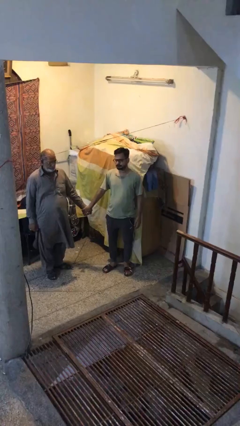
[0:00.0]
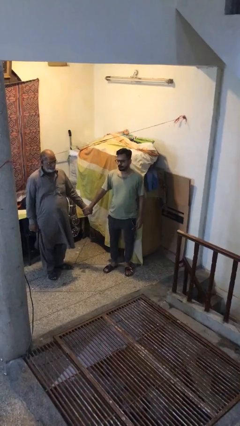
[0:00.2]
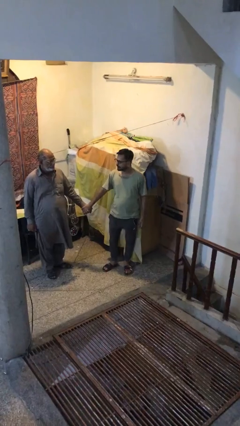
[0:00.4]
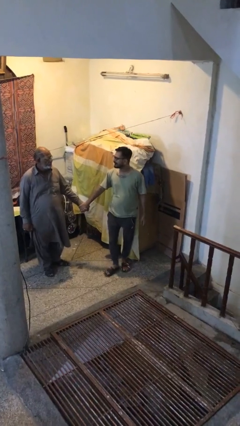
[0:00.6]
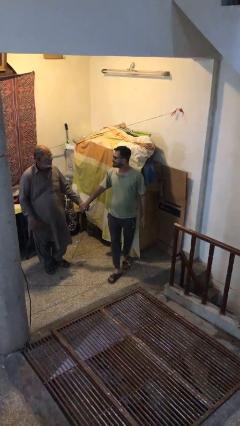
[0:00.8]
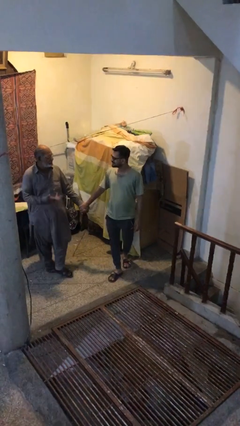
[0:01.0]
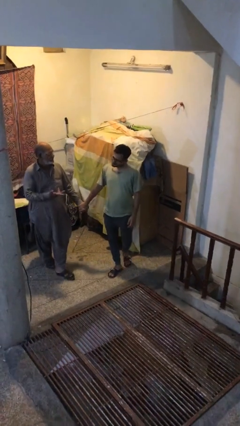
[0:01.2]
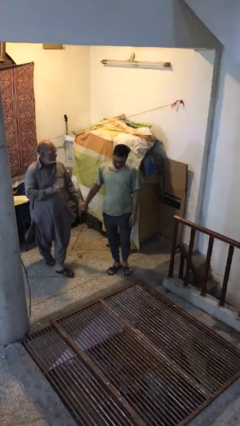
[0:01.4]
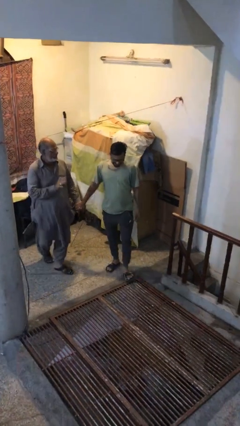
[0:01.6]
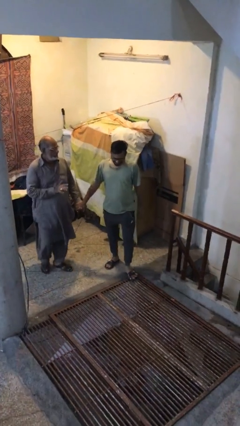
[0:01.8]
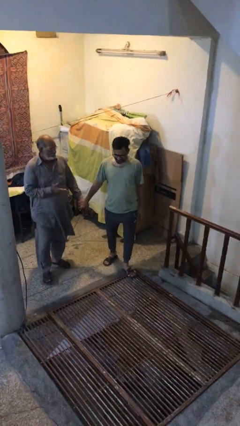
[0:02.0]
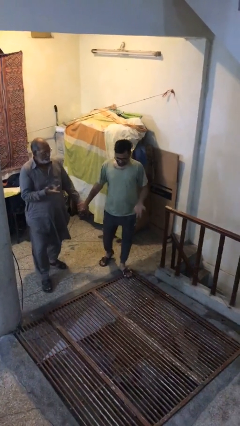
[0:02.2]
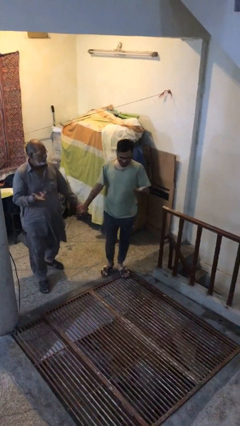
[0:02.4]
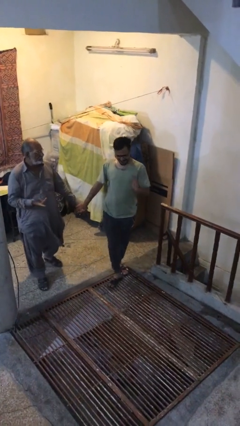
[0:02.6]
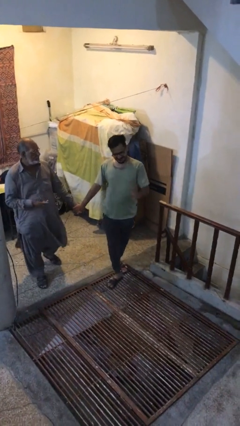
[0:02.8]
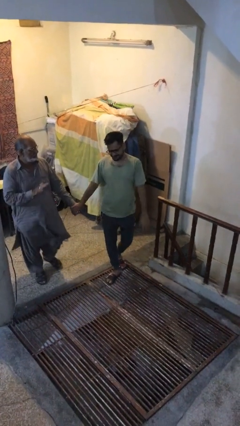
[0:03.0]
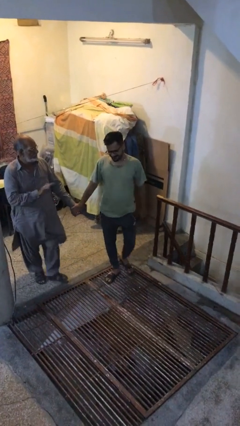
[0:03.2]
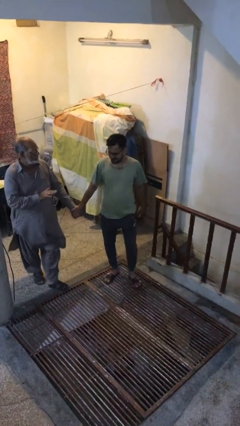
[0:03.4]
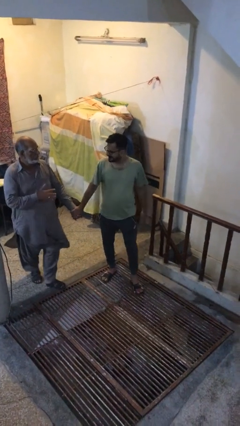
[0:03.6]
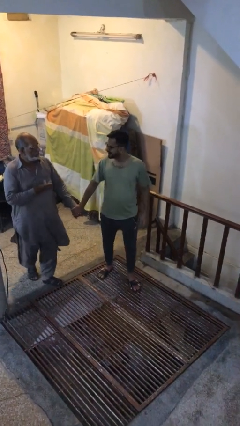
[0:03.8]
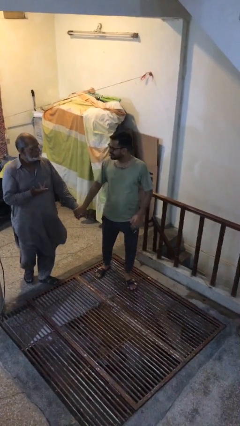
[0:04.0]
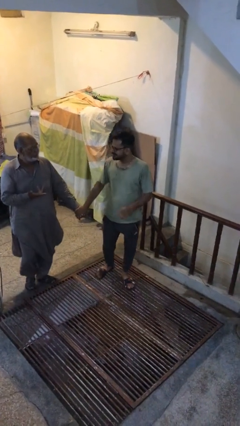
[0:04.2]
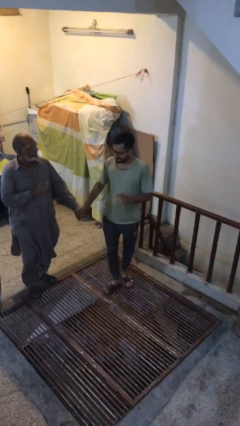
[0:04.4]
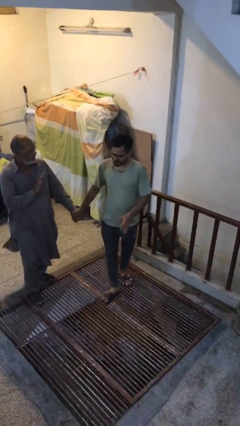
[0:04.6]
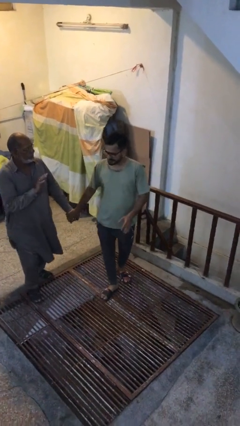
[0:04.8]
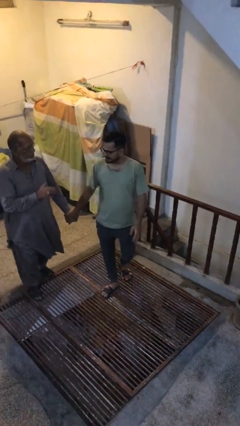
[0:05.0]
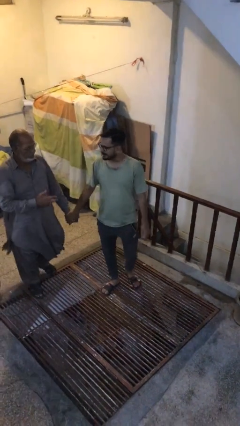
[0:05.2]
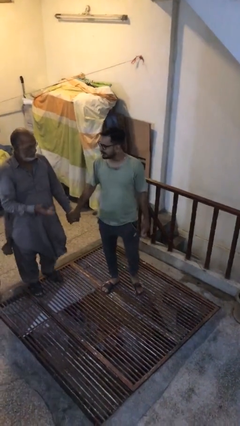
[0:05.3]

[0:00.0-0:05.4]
person holds hand

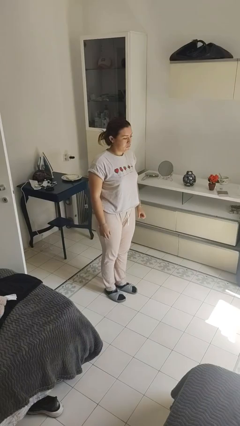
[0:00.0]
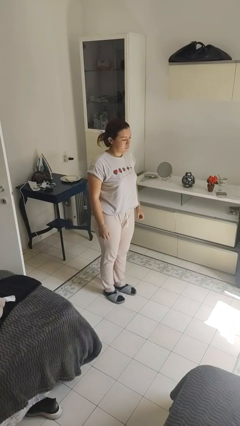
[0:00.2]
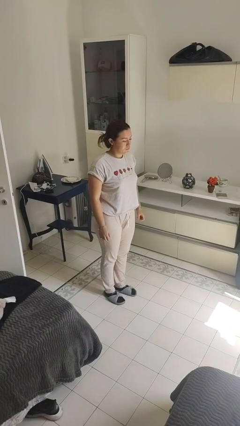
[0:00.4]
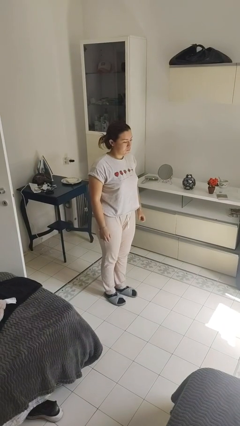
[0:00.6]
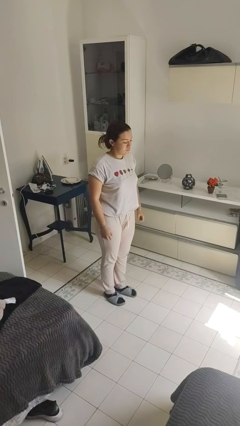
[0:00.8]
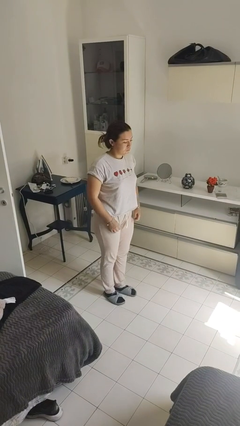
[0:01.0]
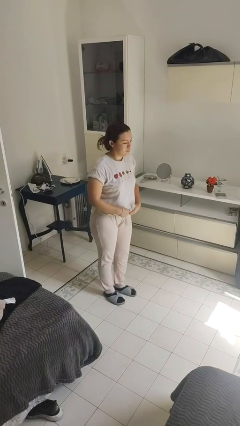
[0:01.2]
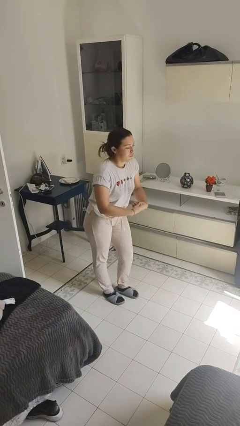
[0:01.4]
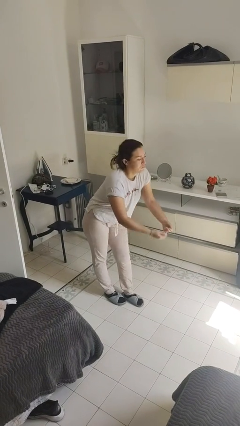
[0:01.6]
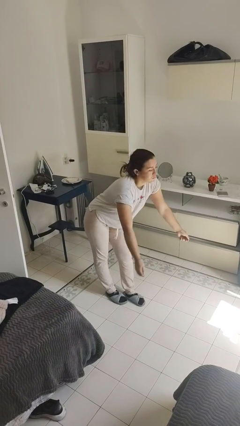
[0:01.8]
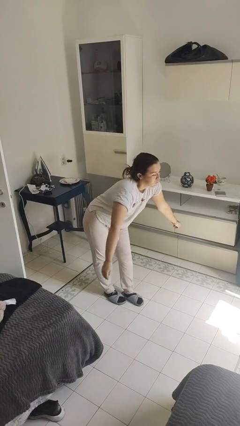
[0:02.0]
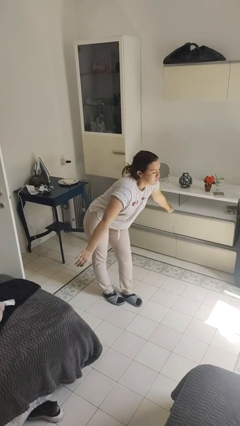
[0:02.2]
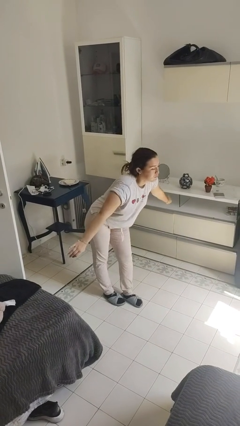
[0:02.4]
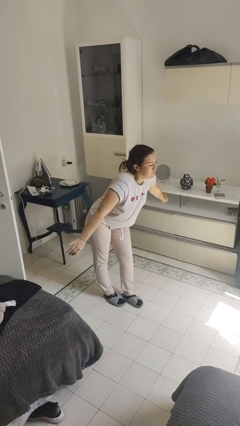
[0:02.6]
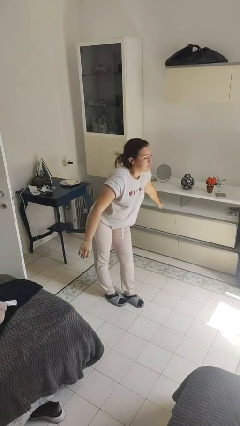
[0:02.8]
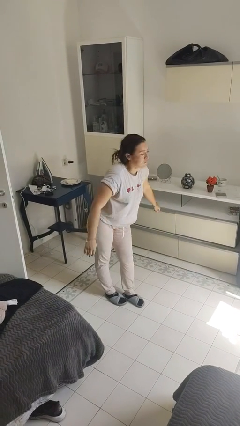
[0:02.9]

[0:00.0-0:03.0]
person bows

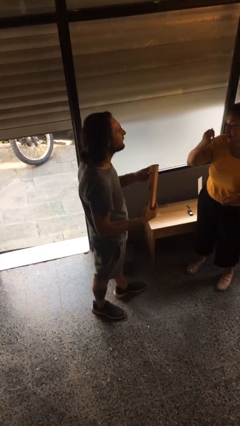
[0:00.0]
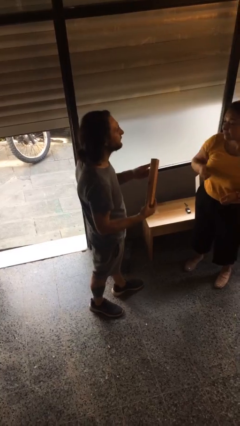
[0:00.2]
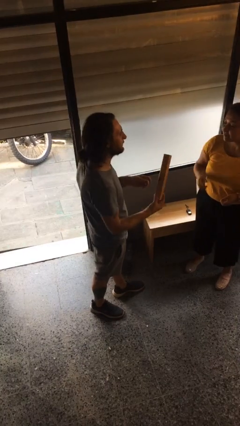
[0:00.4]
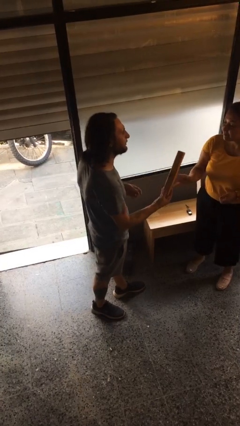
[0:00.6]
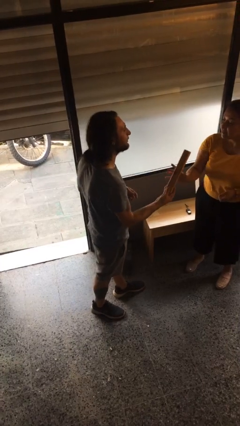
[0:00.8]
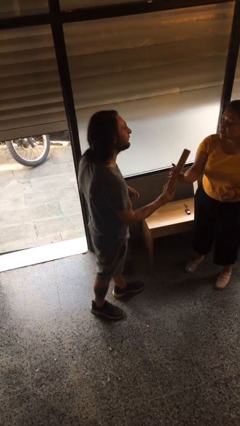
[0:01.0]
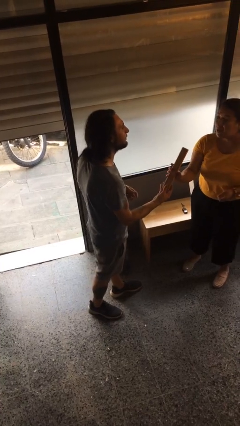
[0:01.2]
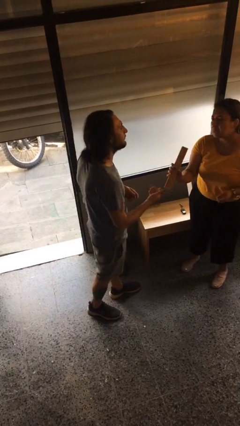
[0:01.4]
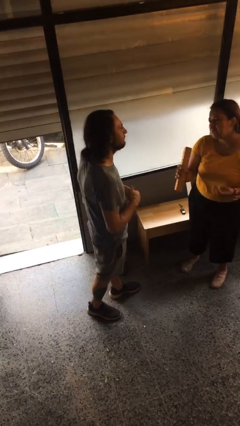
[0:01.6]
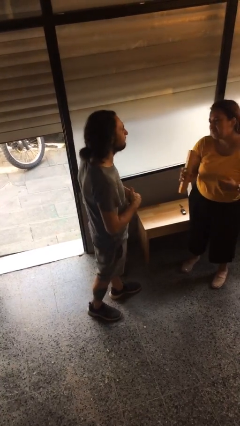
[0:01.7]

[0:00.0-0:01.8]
person transfers object to person

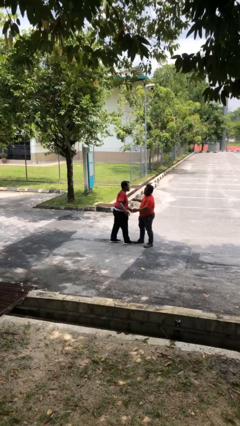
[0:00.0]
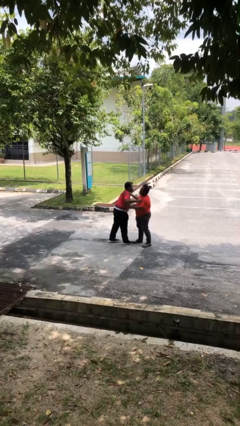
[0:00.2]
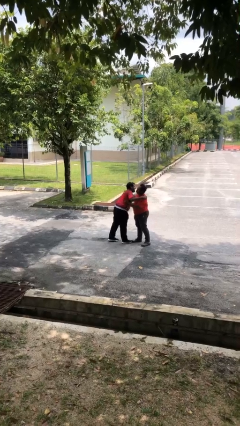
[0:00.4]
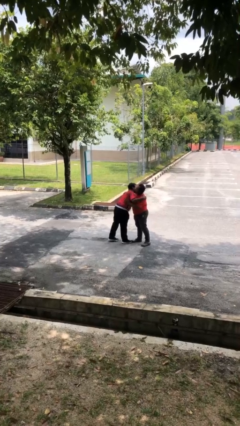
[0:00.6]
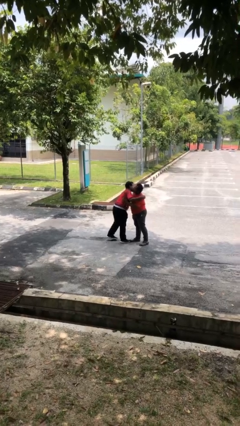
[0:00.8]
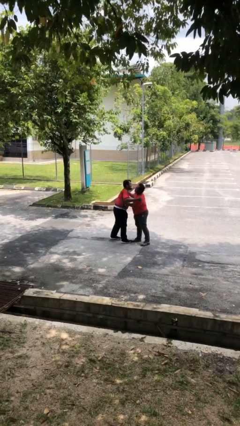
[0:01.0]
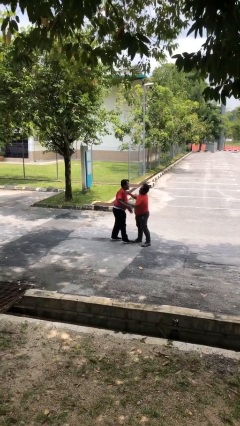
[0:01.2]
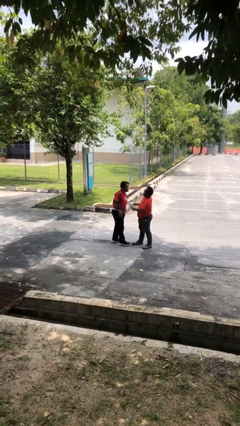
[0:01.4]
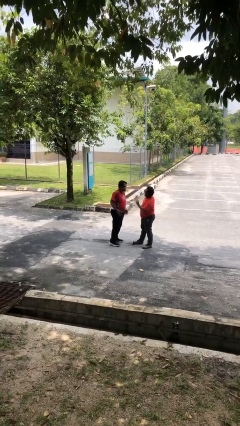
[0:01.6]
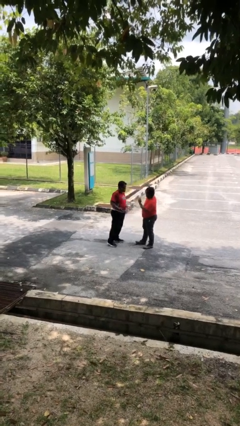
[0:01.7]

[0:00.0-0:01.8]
person embraces person

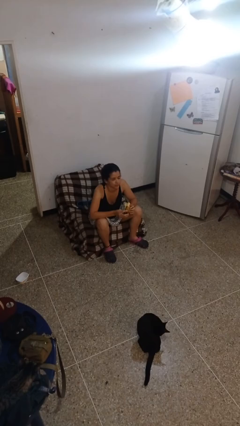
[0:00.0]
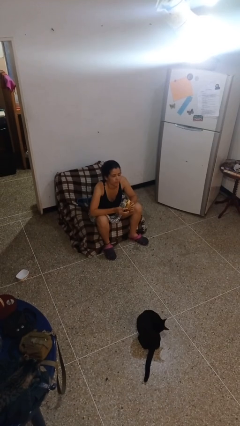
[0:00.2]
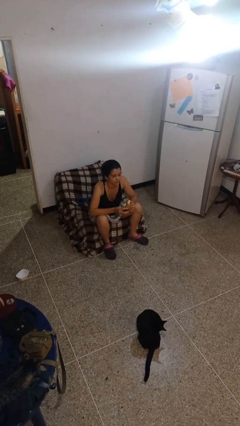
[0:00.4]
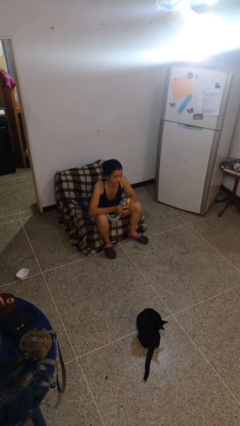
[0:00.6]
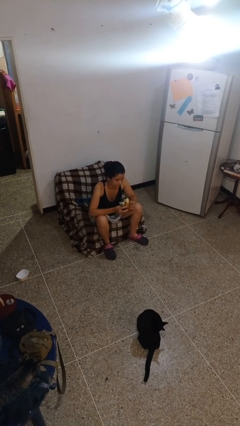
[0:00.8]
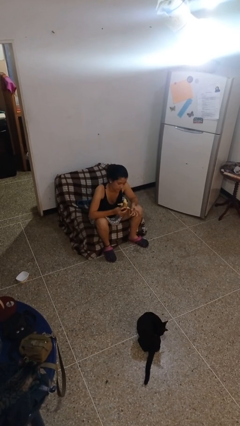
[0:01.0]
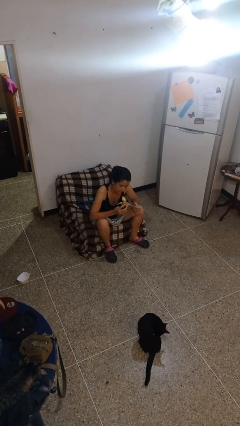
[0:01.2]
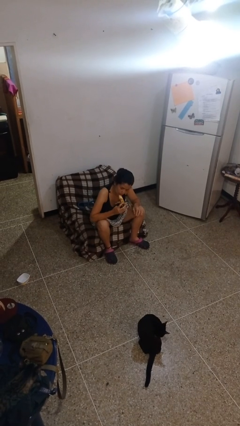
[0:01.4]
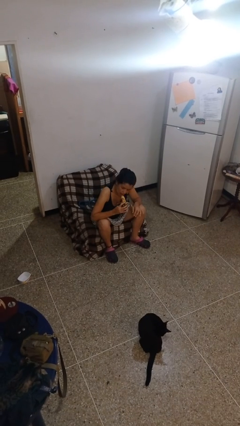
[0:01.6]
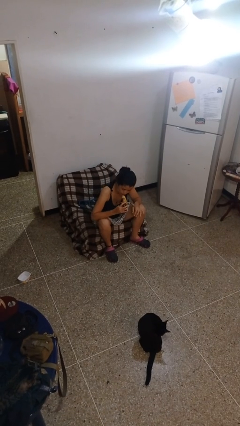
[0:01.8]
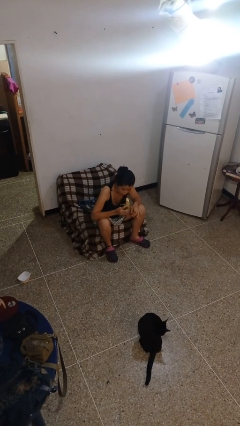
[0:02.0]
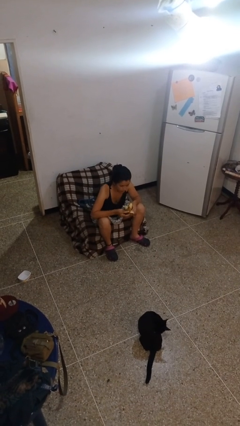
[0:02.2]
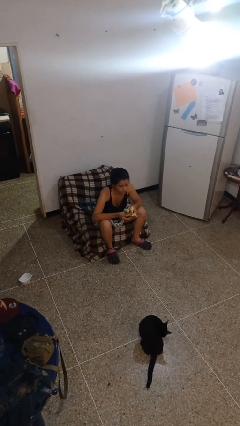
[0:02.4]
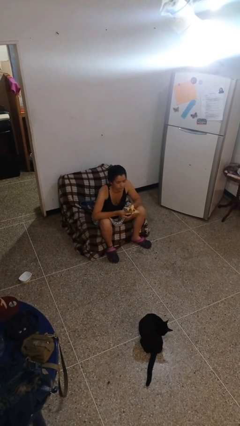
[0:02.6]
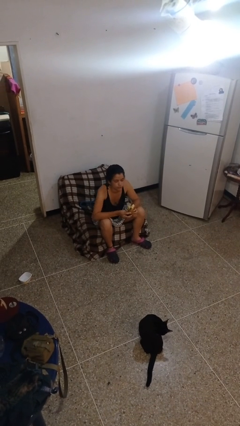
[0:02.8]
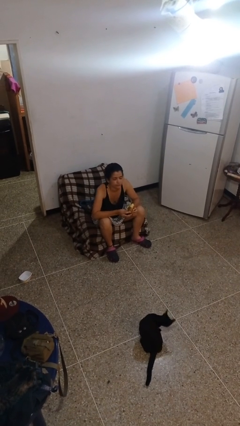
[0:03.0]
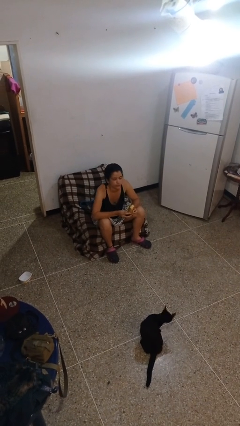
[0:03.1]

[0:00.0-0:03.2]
person eats banana

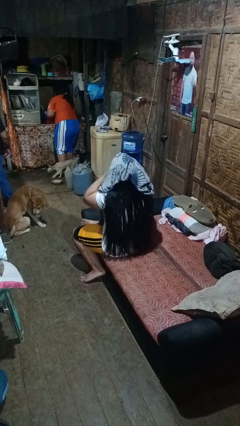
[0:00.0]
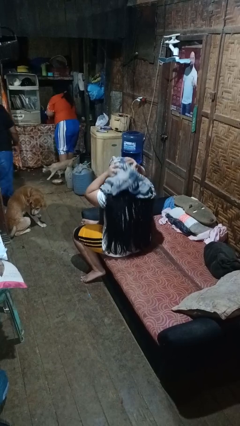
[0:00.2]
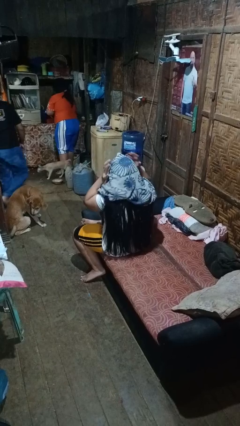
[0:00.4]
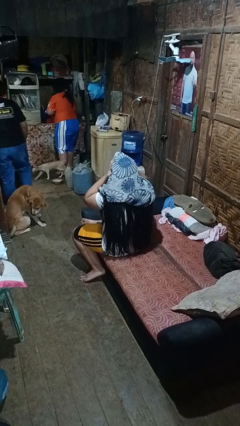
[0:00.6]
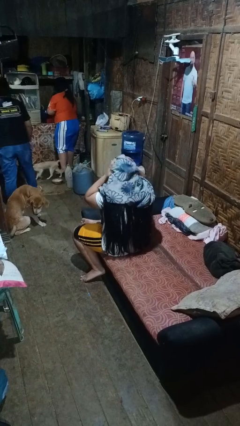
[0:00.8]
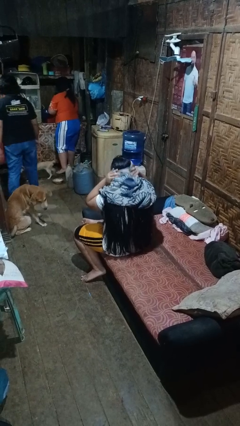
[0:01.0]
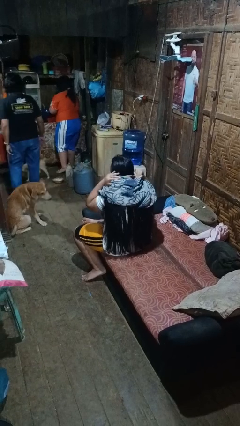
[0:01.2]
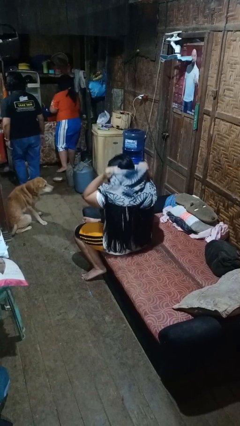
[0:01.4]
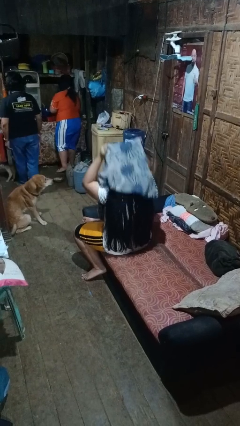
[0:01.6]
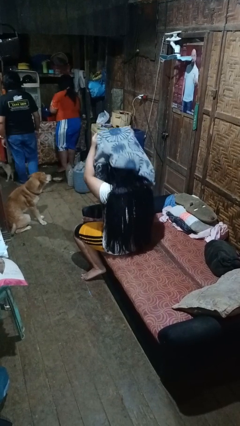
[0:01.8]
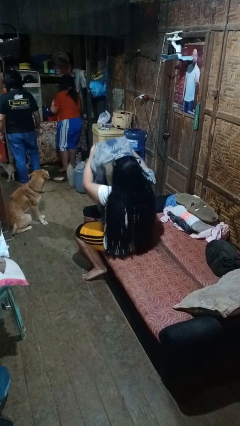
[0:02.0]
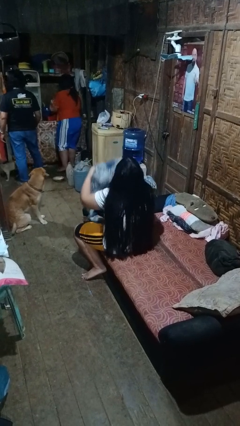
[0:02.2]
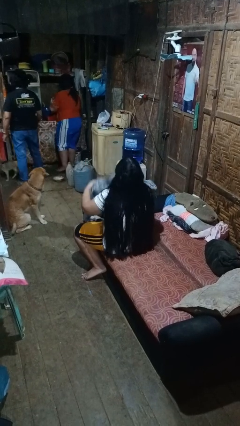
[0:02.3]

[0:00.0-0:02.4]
person dries hair with towel
